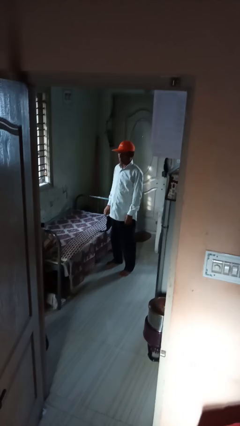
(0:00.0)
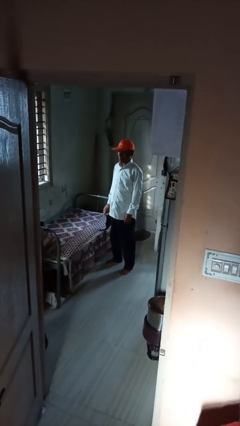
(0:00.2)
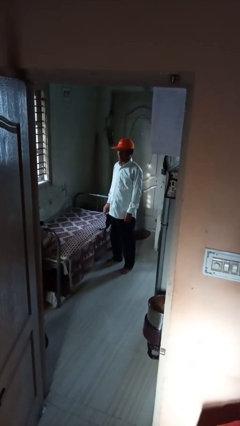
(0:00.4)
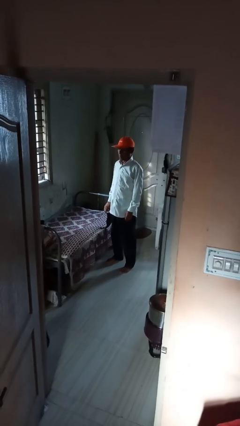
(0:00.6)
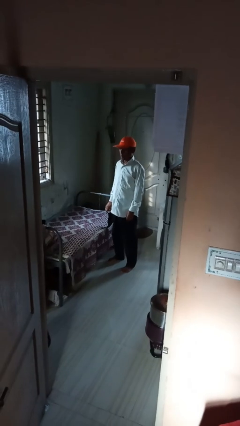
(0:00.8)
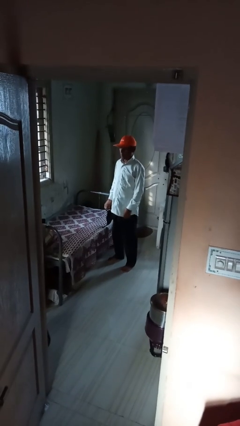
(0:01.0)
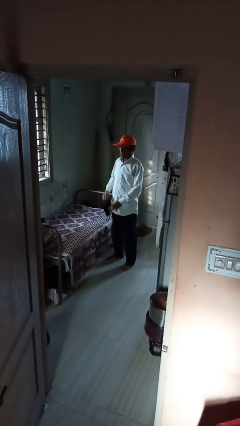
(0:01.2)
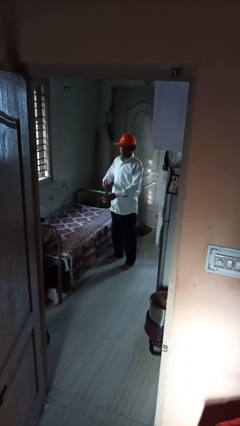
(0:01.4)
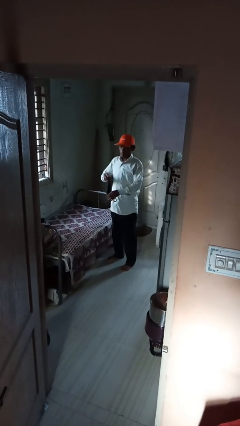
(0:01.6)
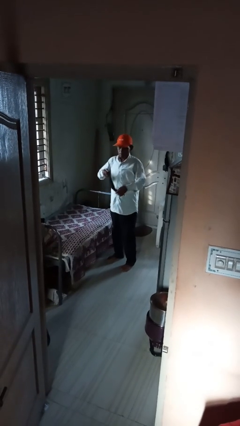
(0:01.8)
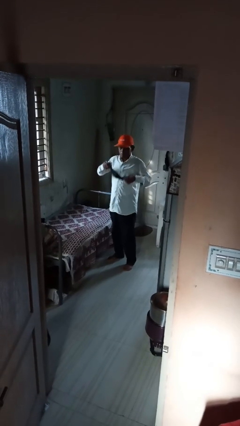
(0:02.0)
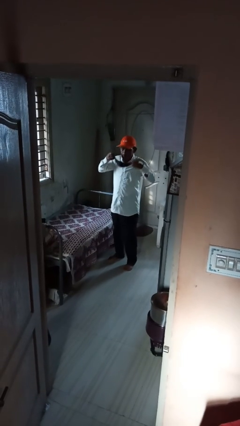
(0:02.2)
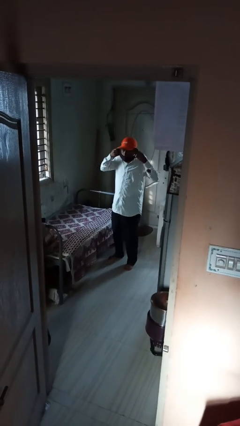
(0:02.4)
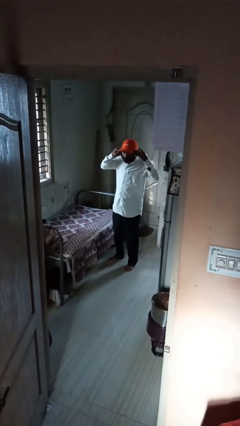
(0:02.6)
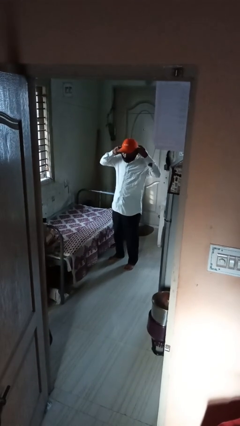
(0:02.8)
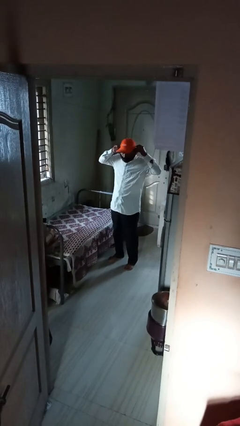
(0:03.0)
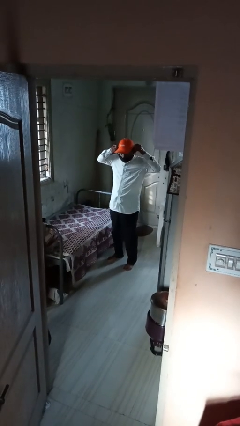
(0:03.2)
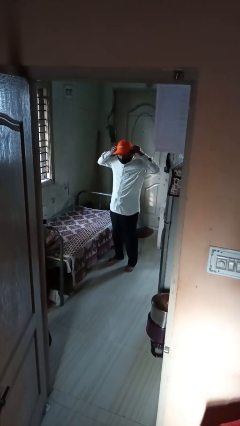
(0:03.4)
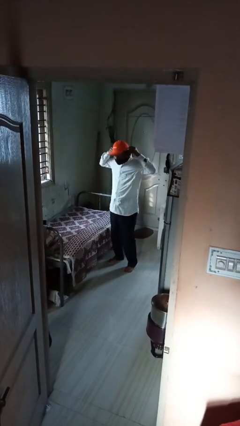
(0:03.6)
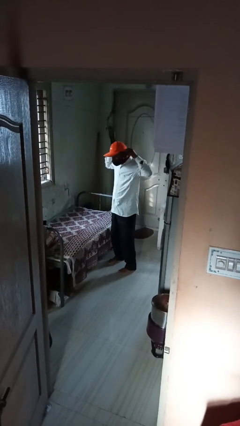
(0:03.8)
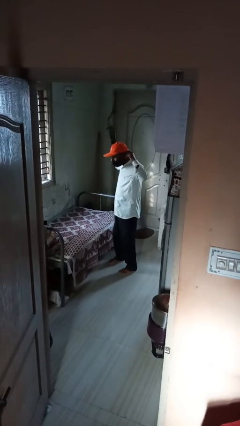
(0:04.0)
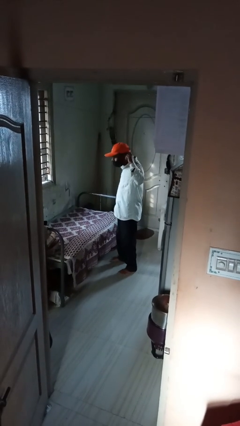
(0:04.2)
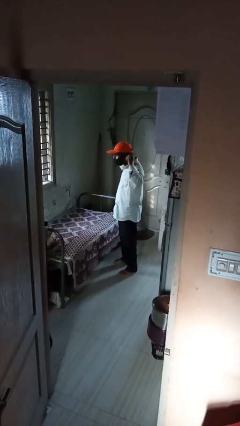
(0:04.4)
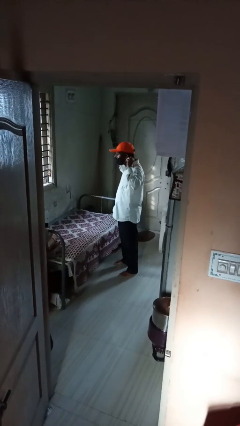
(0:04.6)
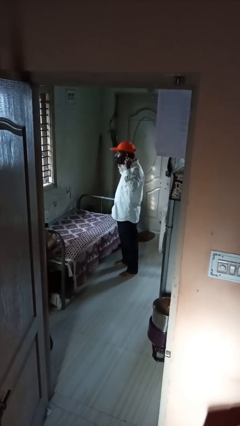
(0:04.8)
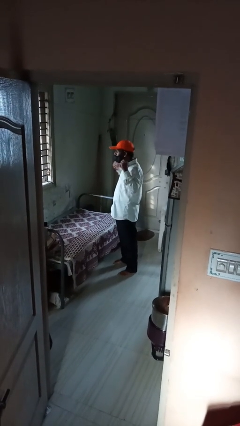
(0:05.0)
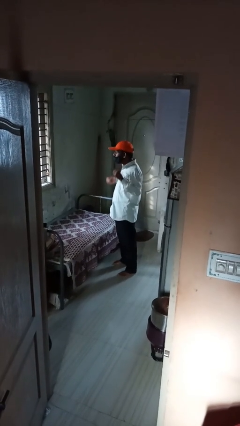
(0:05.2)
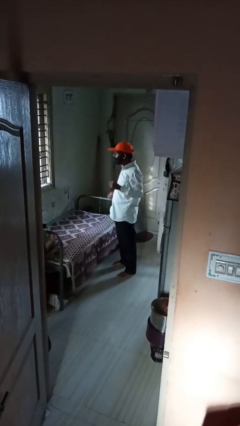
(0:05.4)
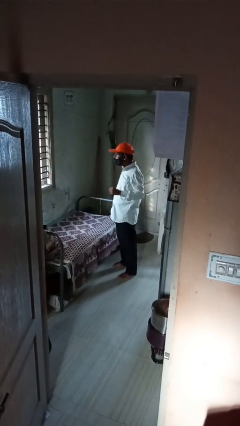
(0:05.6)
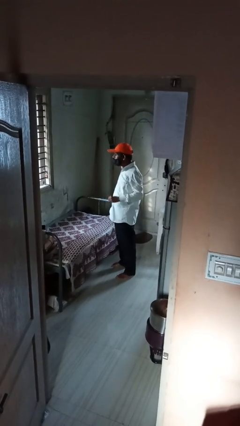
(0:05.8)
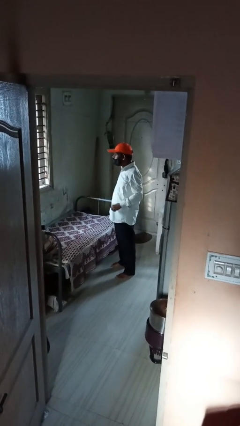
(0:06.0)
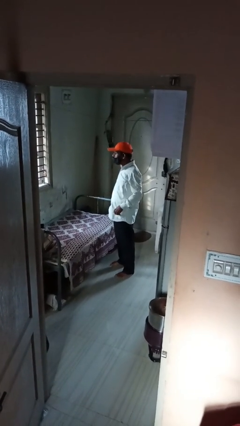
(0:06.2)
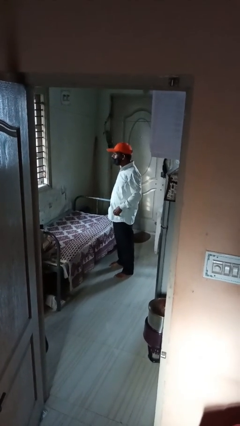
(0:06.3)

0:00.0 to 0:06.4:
person puts on facemask

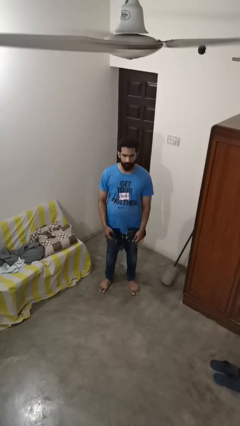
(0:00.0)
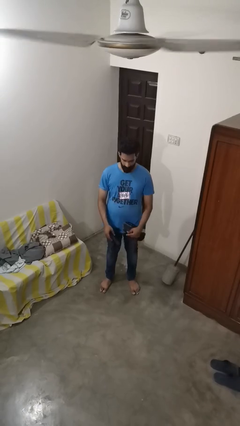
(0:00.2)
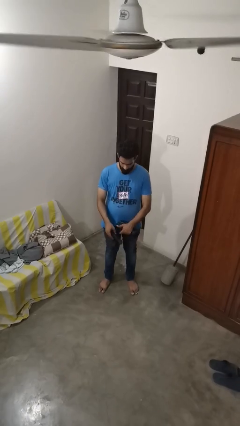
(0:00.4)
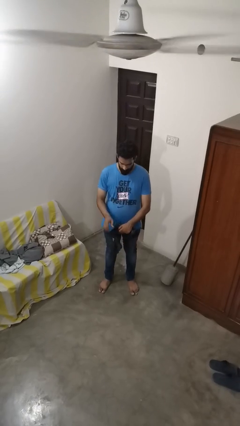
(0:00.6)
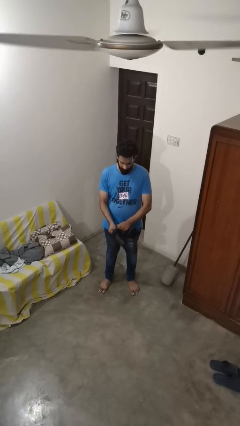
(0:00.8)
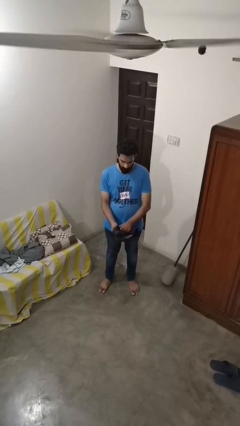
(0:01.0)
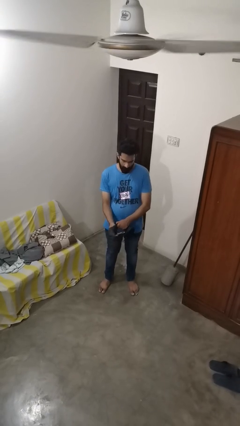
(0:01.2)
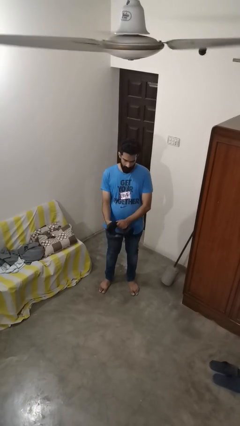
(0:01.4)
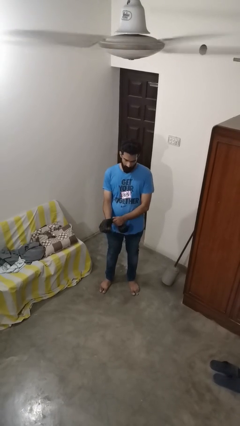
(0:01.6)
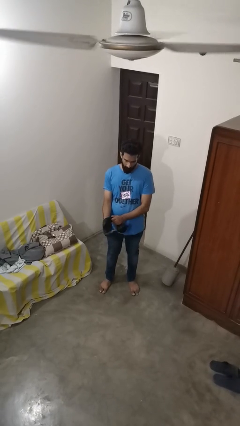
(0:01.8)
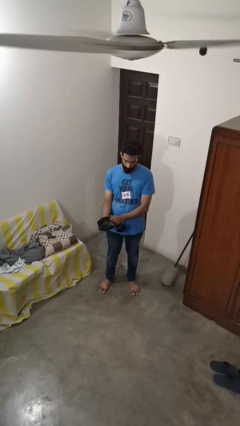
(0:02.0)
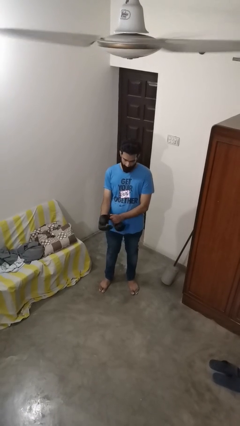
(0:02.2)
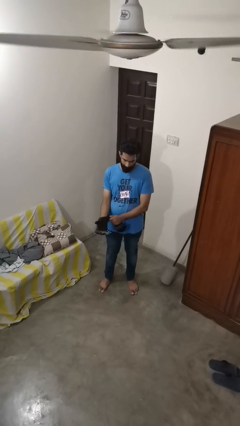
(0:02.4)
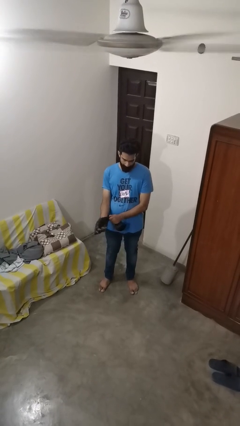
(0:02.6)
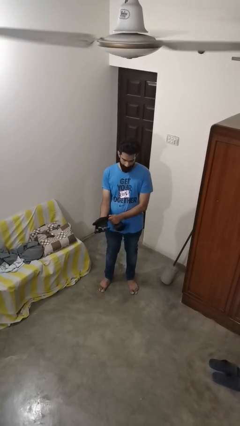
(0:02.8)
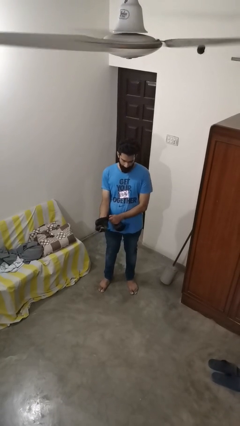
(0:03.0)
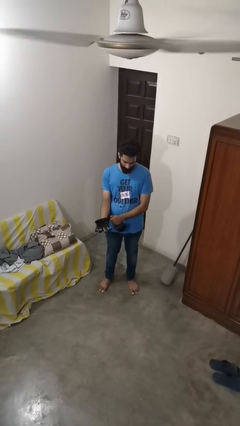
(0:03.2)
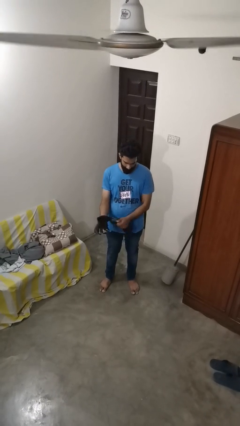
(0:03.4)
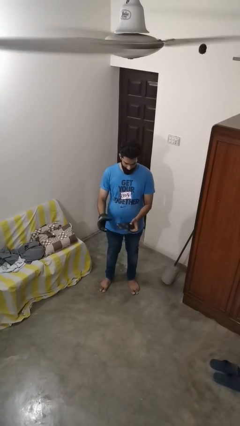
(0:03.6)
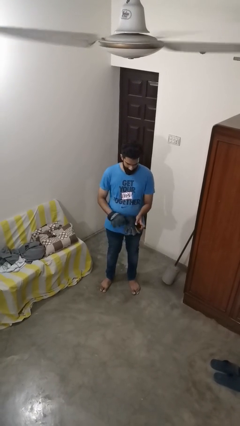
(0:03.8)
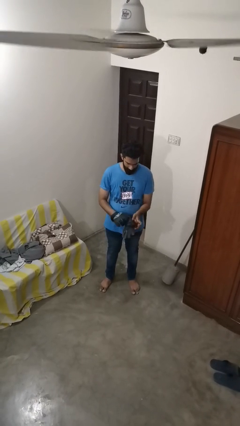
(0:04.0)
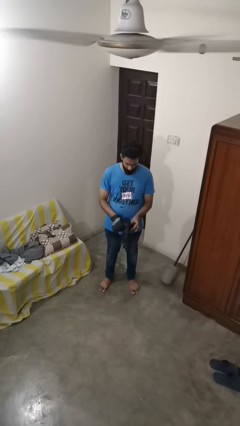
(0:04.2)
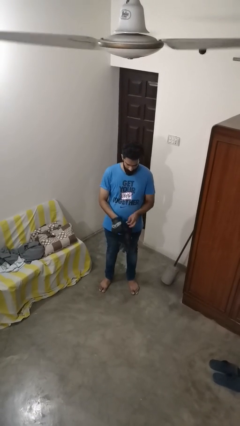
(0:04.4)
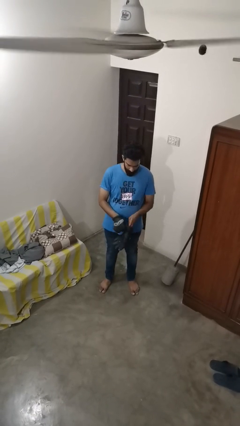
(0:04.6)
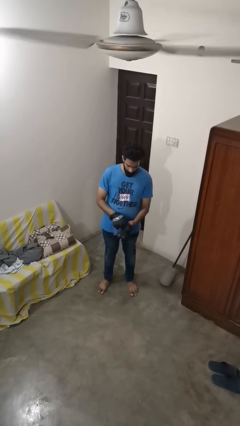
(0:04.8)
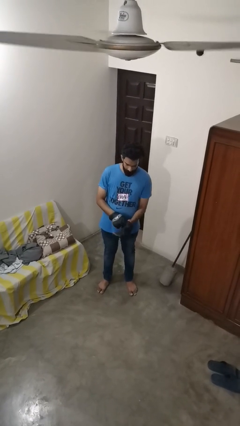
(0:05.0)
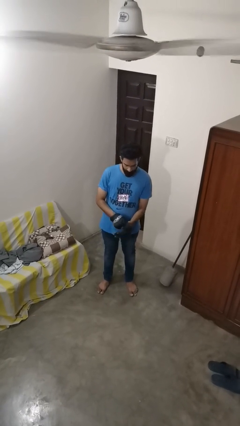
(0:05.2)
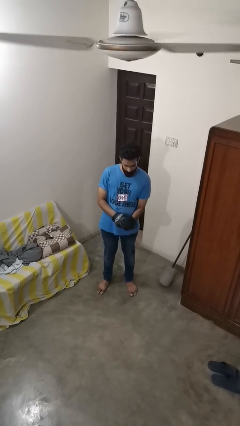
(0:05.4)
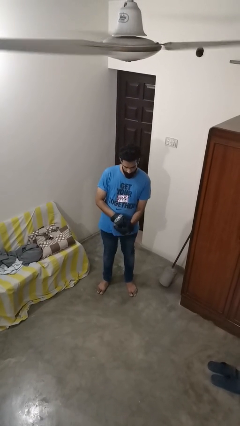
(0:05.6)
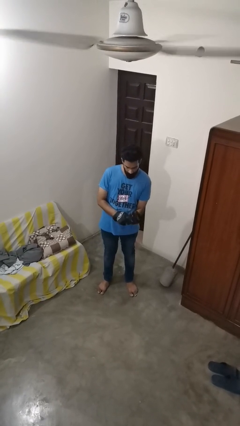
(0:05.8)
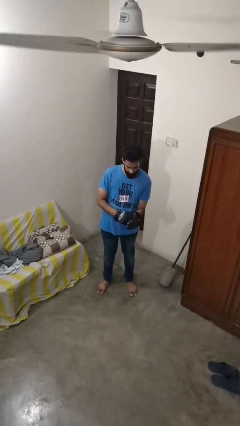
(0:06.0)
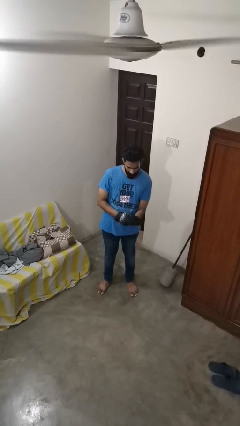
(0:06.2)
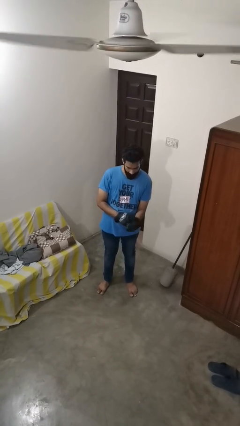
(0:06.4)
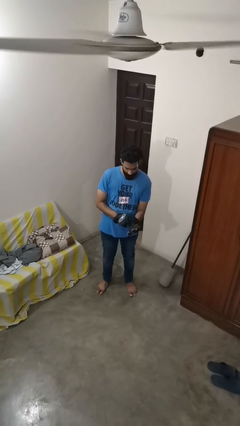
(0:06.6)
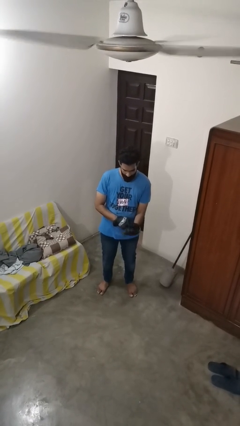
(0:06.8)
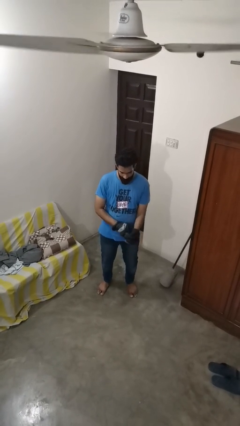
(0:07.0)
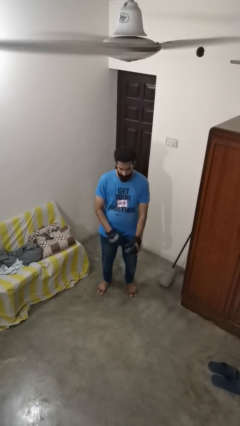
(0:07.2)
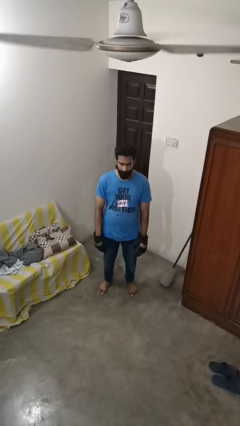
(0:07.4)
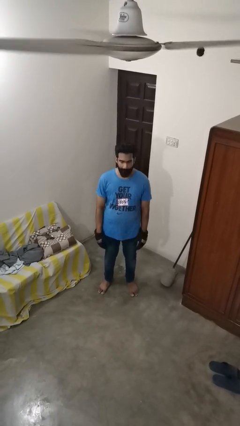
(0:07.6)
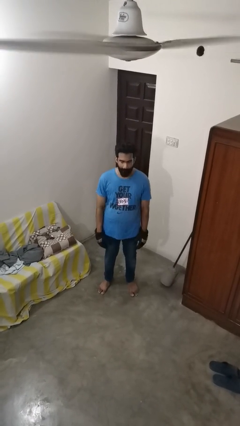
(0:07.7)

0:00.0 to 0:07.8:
person puts on gloves

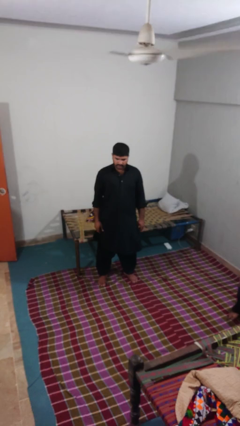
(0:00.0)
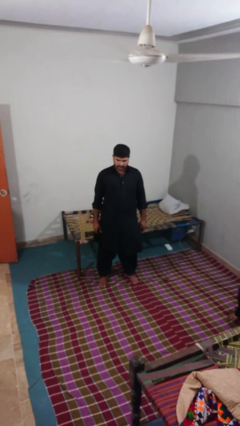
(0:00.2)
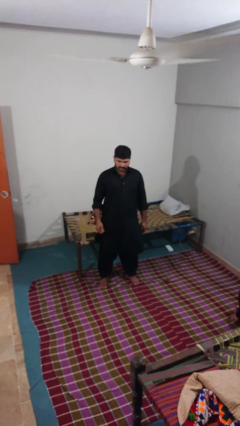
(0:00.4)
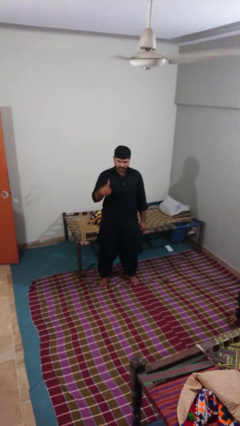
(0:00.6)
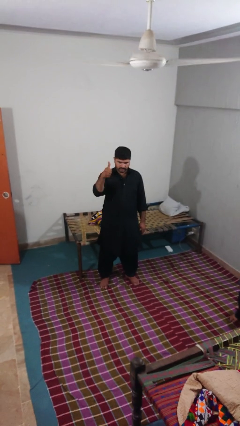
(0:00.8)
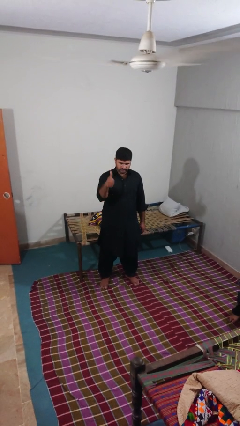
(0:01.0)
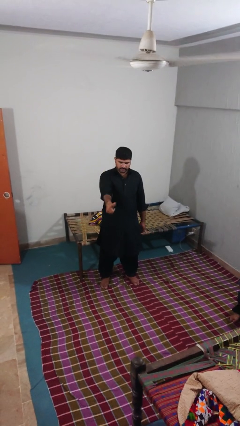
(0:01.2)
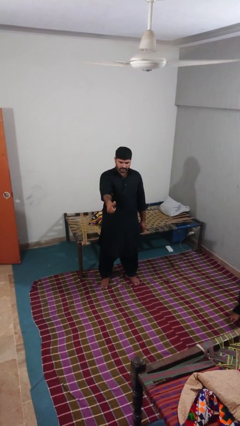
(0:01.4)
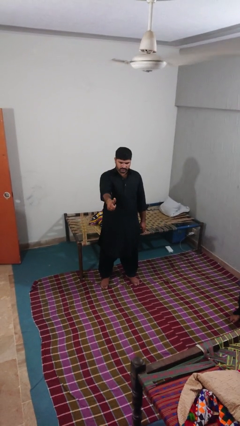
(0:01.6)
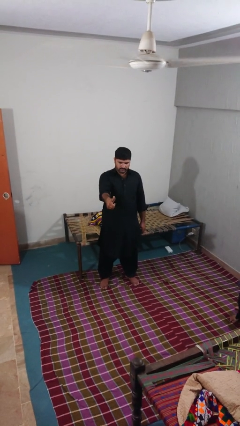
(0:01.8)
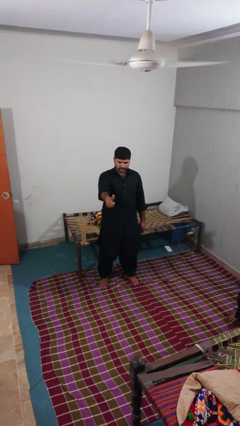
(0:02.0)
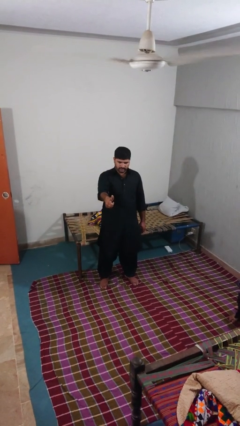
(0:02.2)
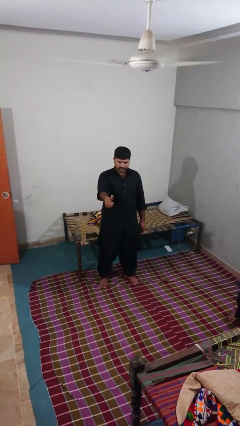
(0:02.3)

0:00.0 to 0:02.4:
person gestures thumbs up

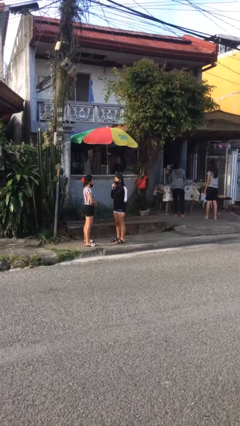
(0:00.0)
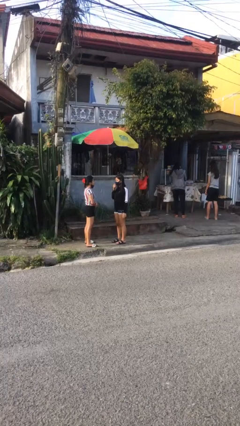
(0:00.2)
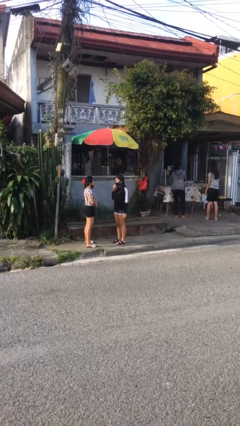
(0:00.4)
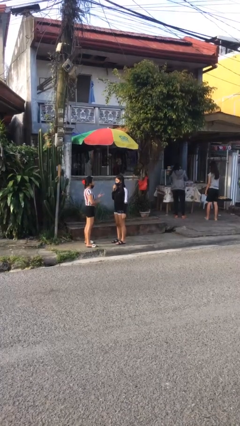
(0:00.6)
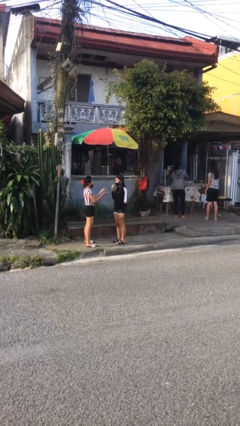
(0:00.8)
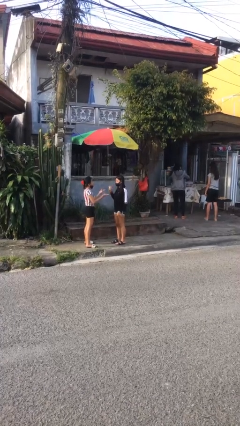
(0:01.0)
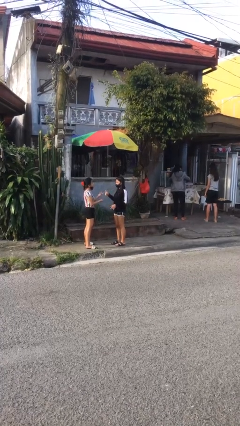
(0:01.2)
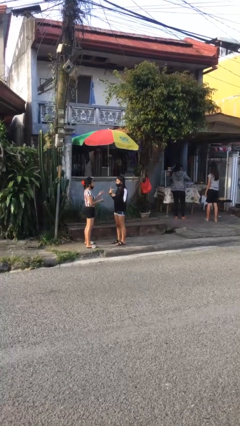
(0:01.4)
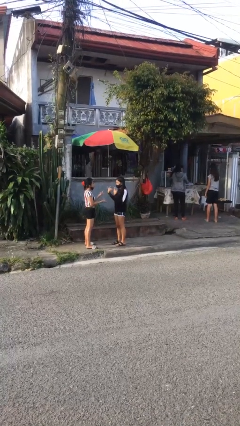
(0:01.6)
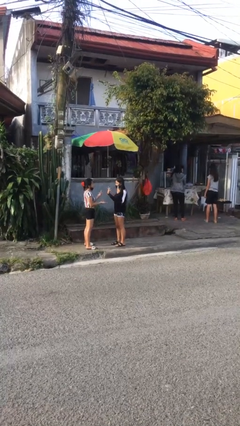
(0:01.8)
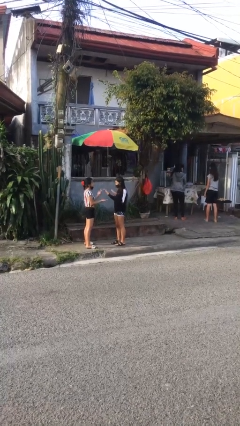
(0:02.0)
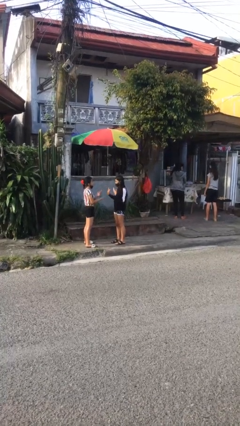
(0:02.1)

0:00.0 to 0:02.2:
person talks to person
